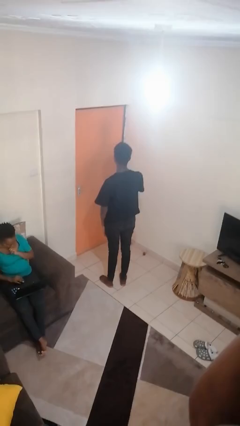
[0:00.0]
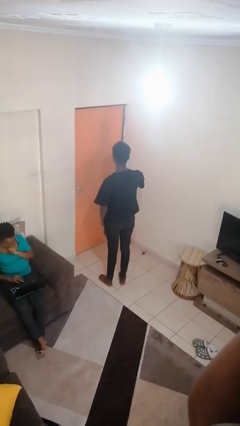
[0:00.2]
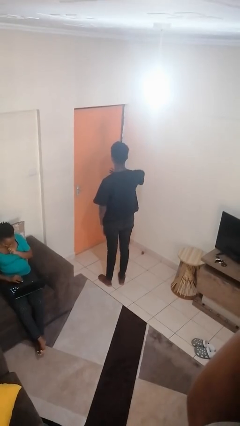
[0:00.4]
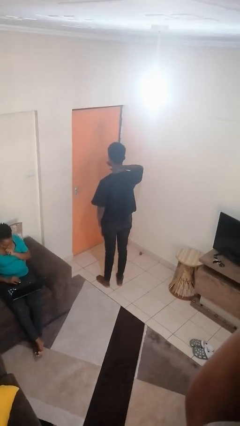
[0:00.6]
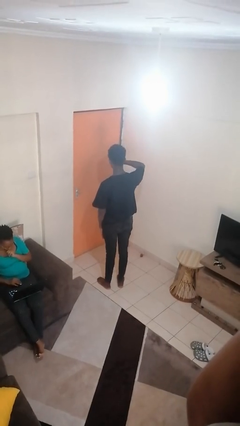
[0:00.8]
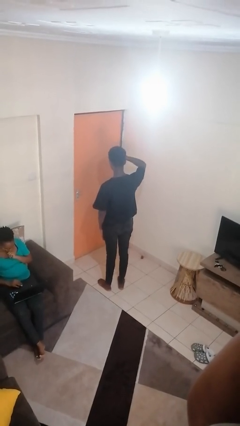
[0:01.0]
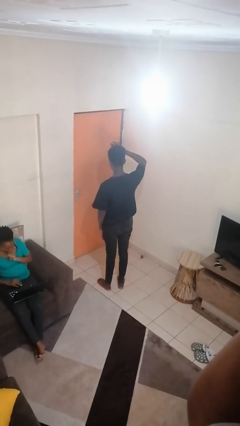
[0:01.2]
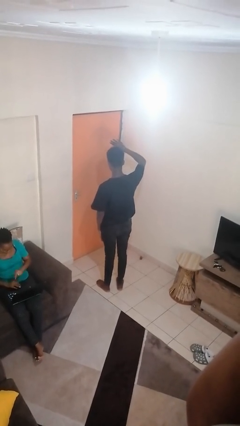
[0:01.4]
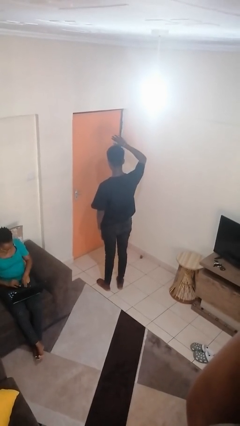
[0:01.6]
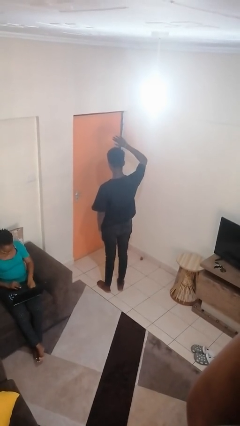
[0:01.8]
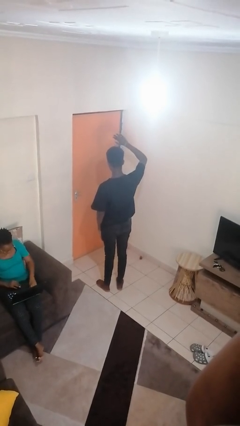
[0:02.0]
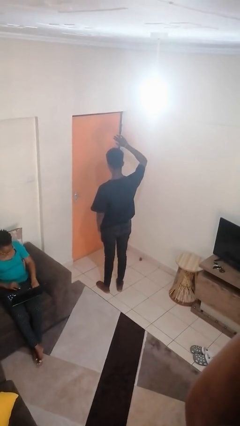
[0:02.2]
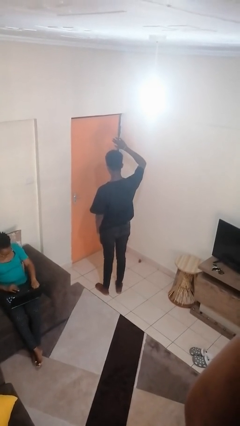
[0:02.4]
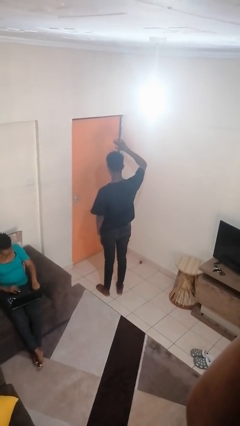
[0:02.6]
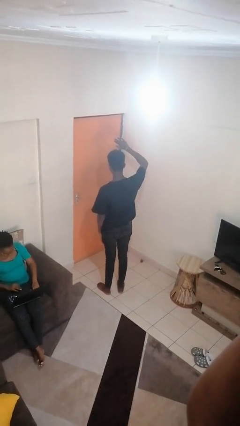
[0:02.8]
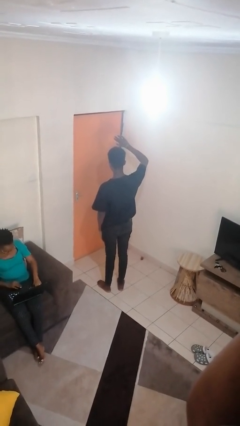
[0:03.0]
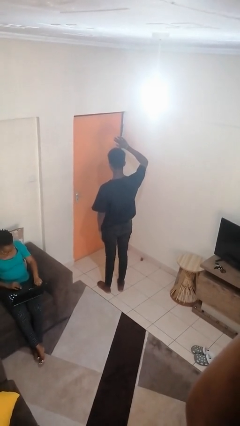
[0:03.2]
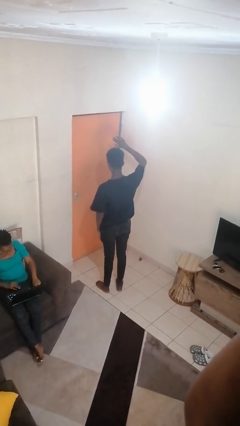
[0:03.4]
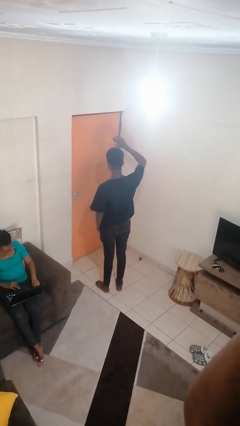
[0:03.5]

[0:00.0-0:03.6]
person gestures swipe up

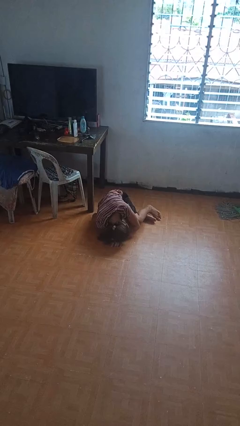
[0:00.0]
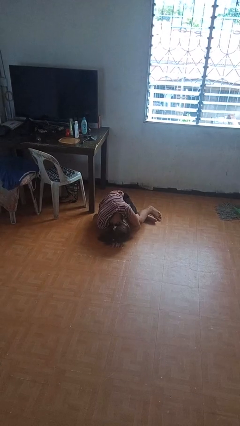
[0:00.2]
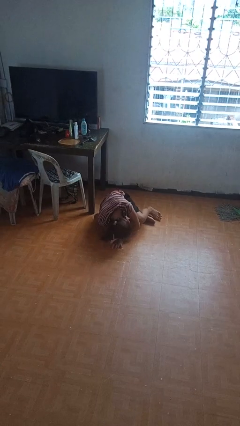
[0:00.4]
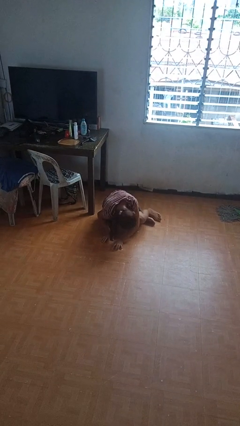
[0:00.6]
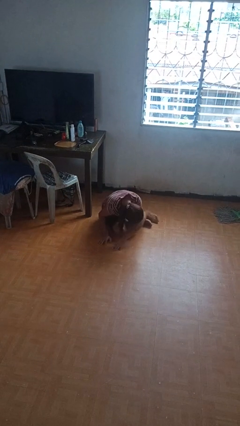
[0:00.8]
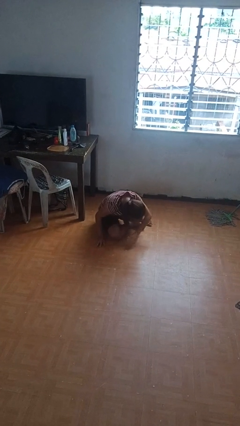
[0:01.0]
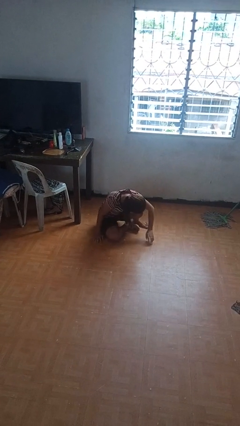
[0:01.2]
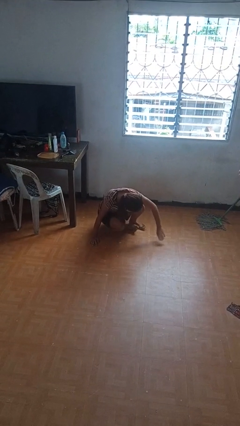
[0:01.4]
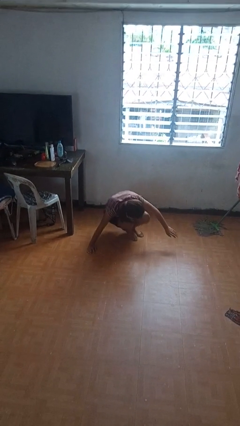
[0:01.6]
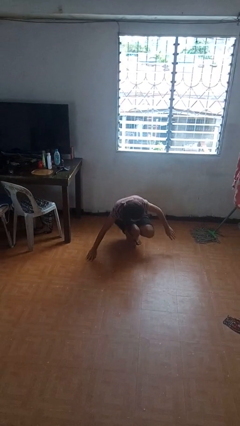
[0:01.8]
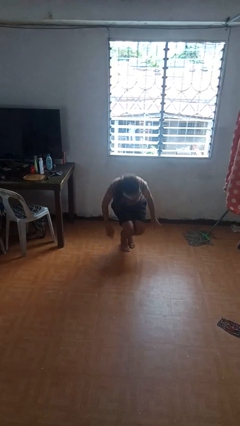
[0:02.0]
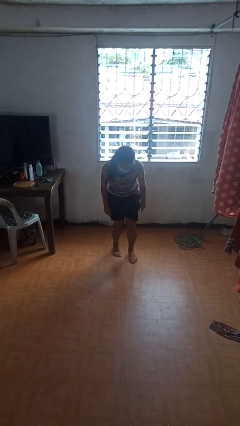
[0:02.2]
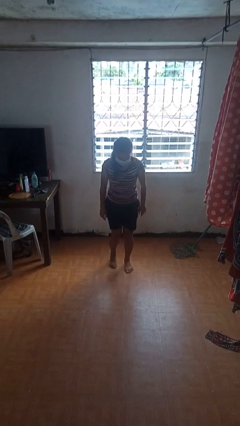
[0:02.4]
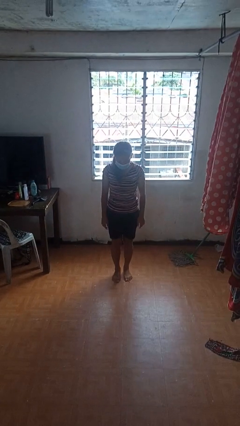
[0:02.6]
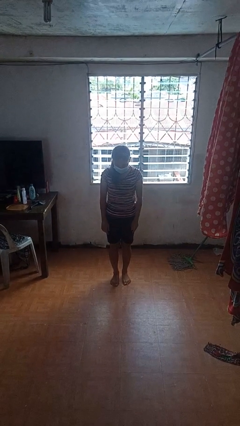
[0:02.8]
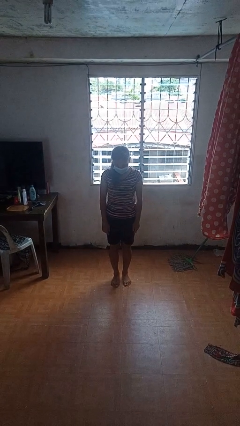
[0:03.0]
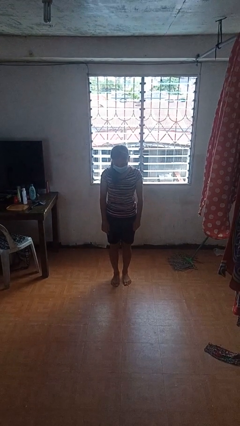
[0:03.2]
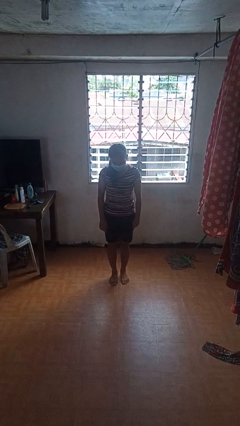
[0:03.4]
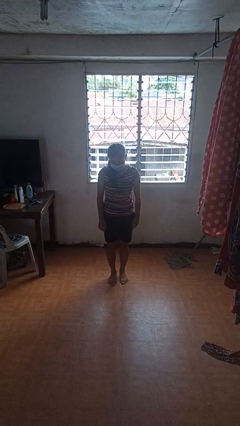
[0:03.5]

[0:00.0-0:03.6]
person stands up from floor

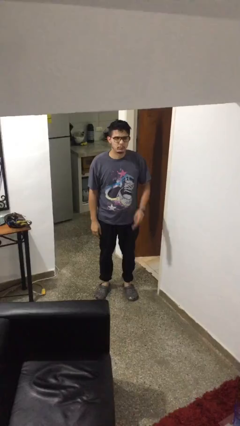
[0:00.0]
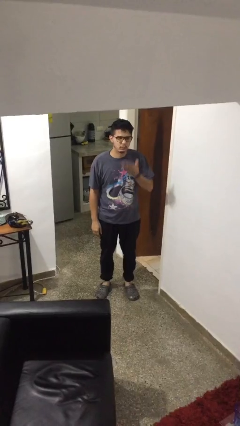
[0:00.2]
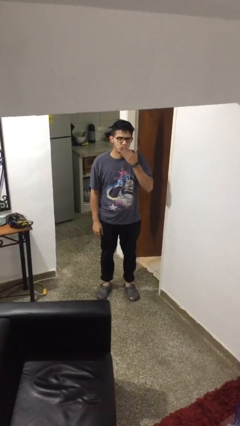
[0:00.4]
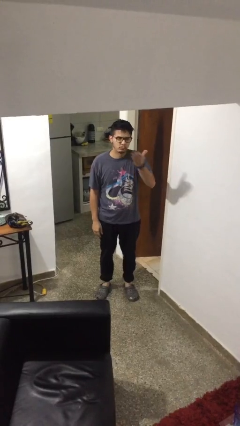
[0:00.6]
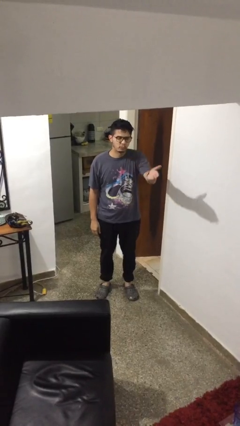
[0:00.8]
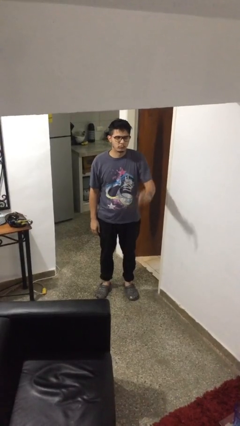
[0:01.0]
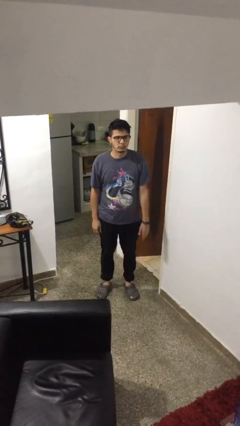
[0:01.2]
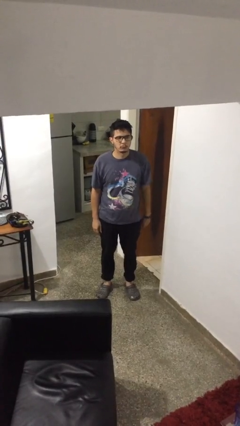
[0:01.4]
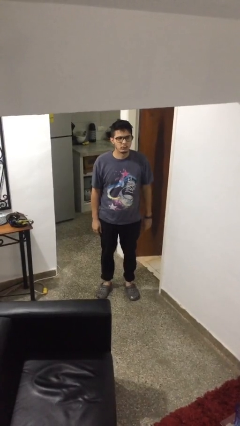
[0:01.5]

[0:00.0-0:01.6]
person gestures blow kiss

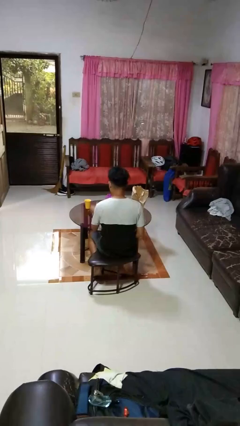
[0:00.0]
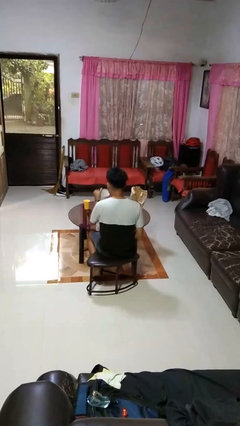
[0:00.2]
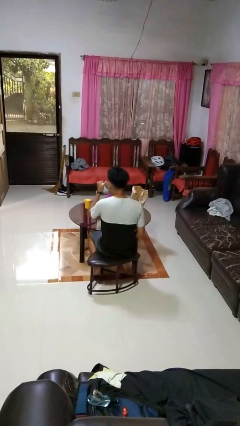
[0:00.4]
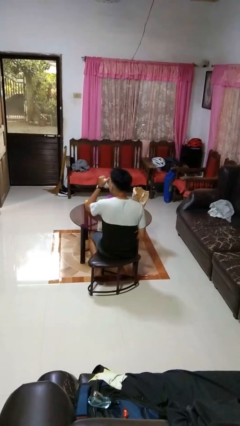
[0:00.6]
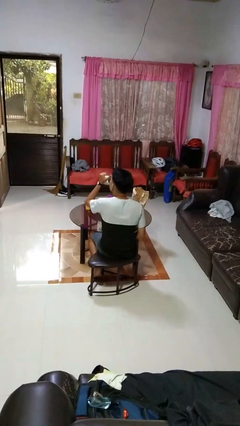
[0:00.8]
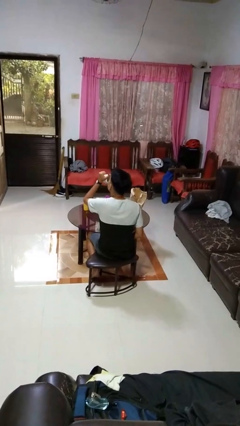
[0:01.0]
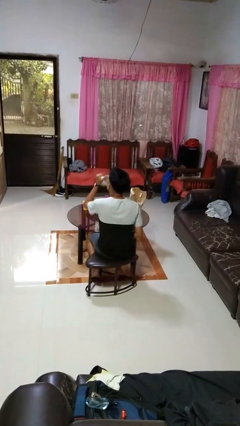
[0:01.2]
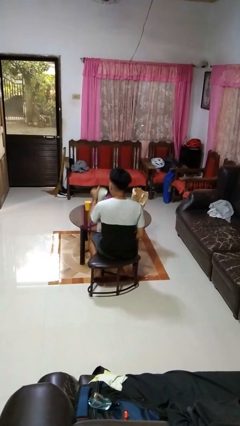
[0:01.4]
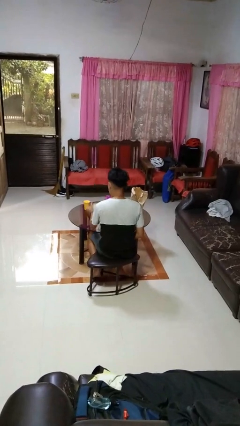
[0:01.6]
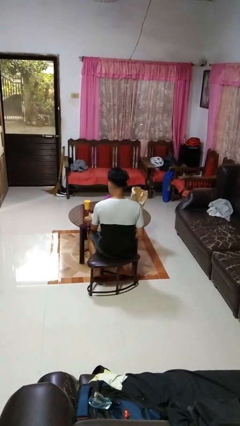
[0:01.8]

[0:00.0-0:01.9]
person drinks from mug

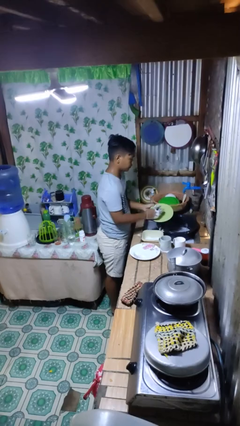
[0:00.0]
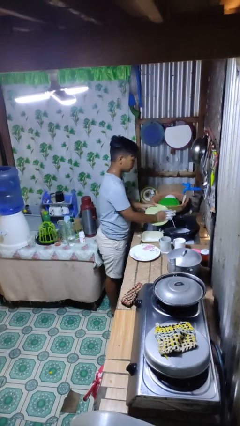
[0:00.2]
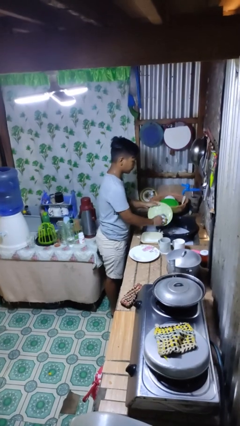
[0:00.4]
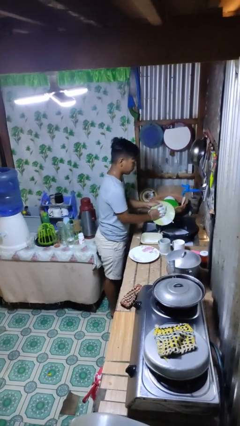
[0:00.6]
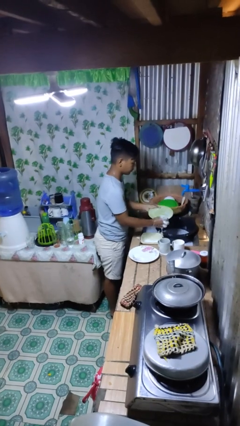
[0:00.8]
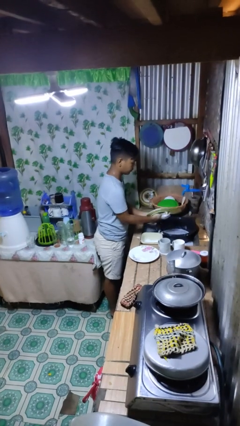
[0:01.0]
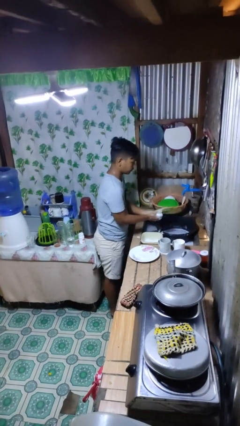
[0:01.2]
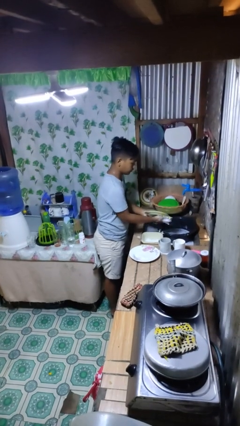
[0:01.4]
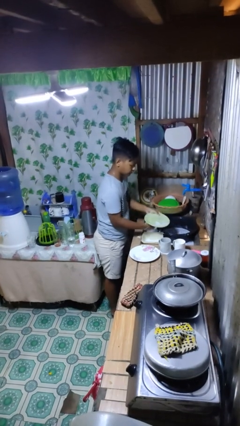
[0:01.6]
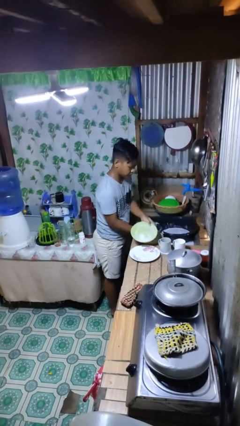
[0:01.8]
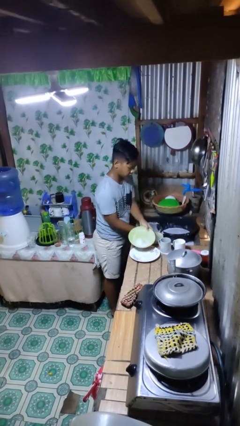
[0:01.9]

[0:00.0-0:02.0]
person washes dish

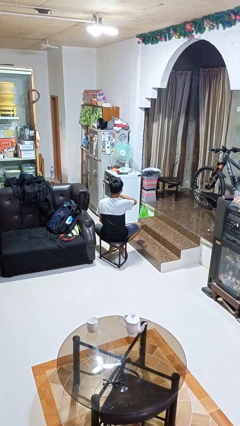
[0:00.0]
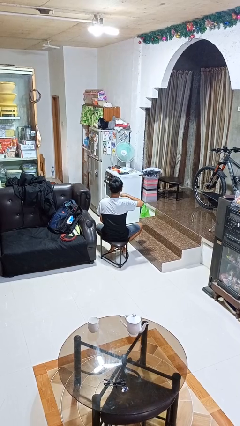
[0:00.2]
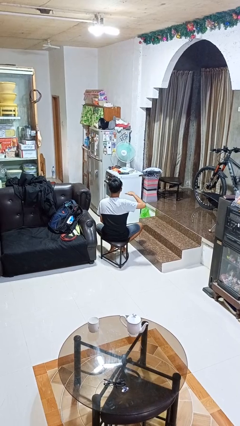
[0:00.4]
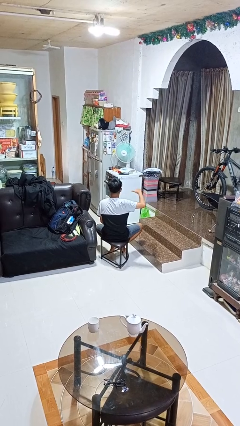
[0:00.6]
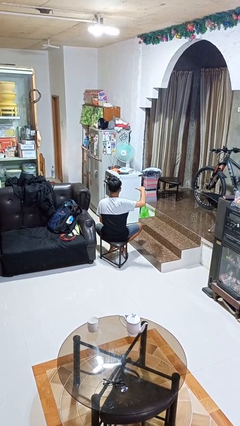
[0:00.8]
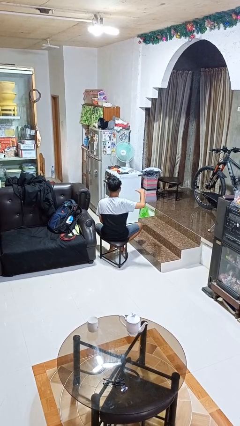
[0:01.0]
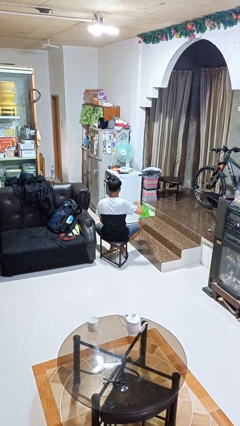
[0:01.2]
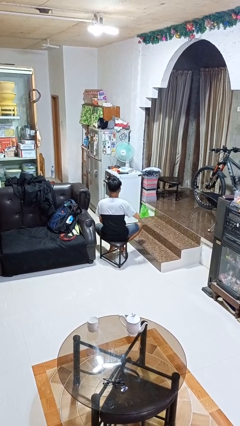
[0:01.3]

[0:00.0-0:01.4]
person gestures cut

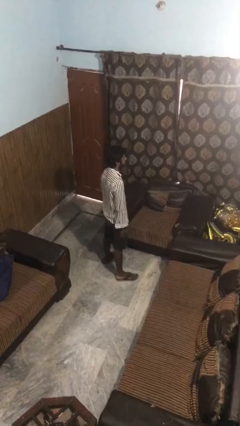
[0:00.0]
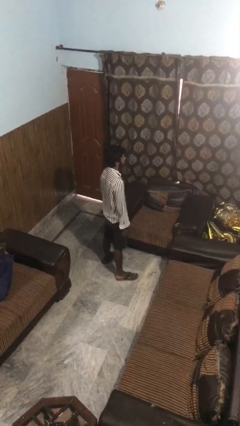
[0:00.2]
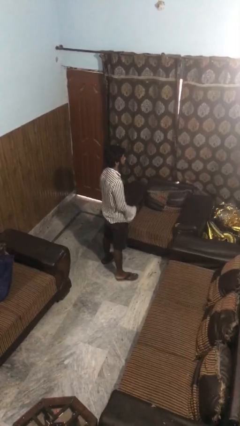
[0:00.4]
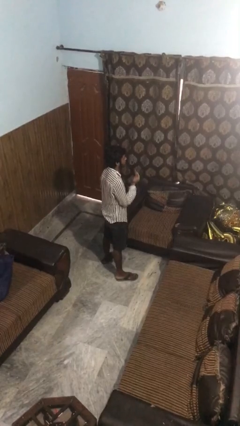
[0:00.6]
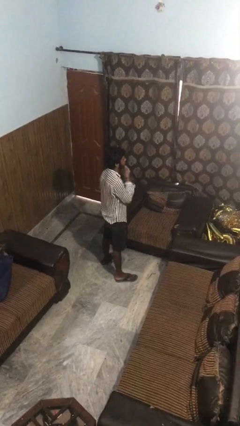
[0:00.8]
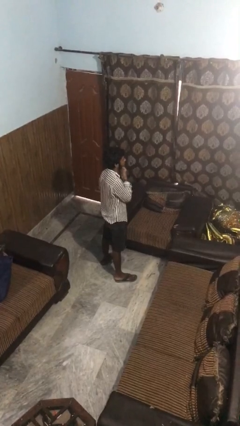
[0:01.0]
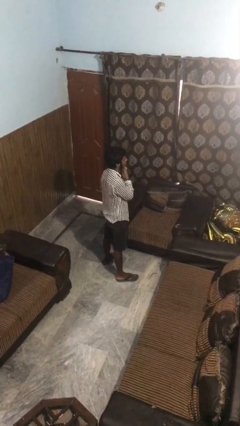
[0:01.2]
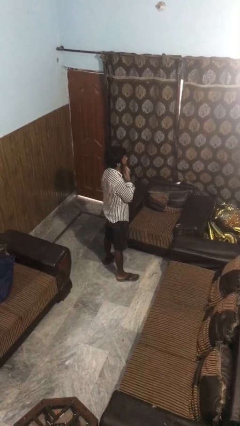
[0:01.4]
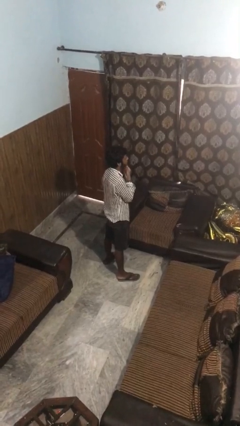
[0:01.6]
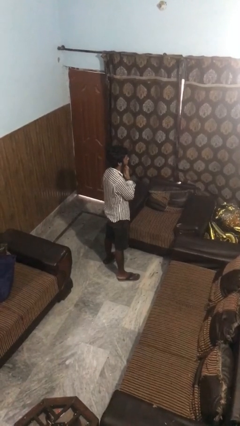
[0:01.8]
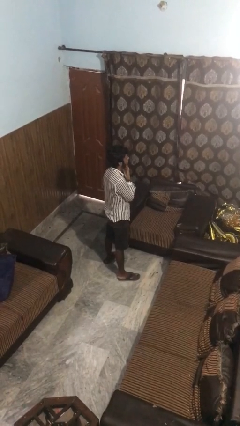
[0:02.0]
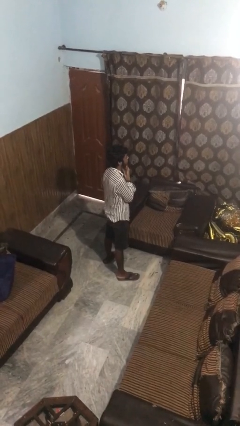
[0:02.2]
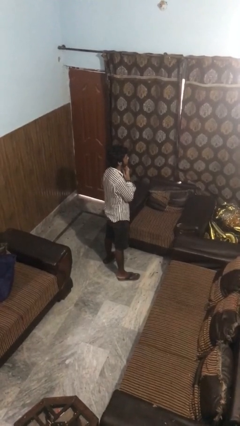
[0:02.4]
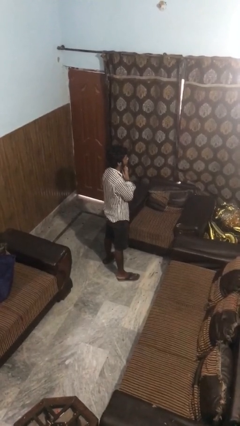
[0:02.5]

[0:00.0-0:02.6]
person strokes chin
